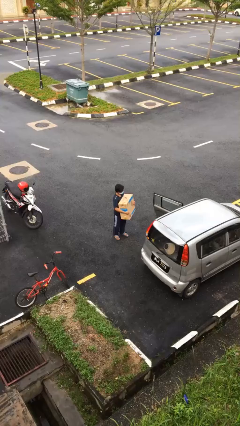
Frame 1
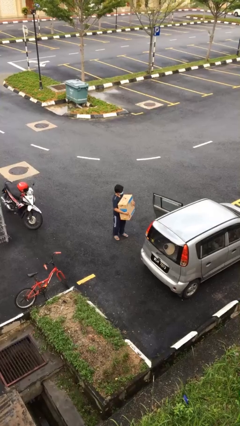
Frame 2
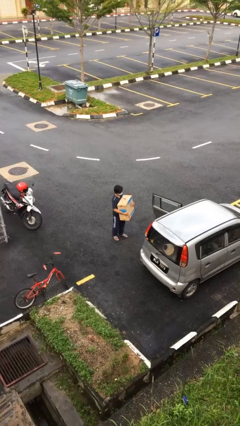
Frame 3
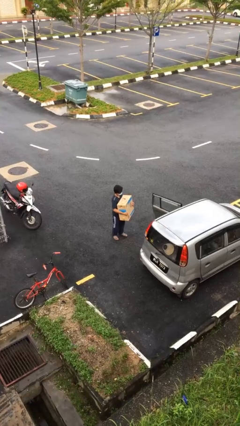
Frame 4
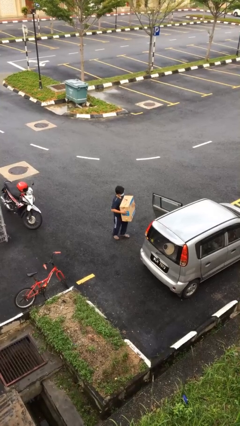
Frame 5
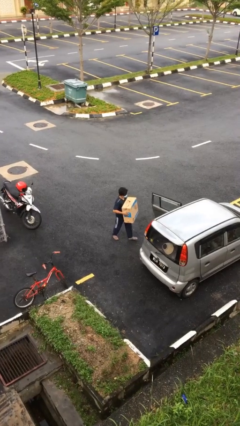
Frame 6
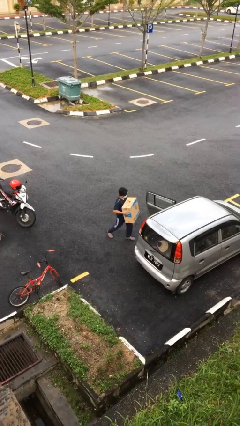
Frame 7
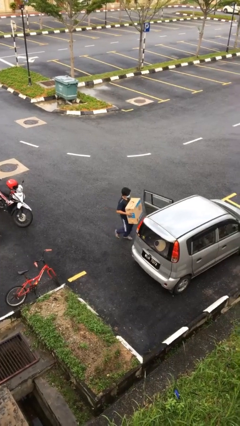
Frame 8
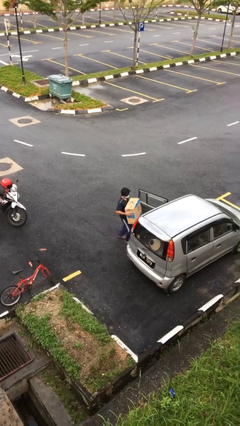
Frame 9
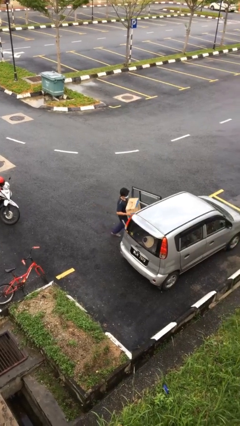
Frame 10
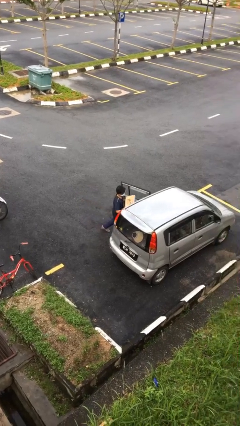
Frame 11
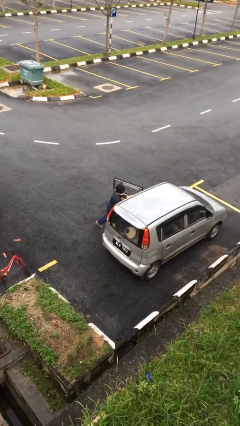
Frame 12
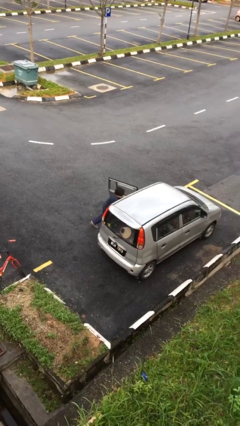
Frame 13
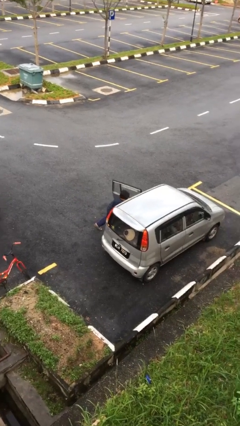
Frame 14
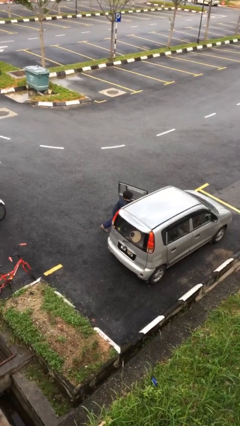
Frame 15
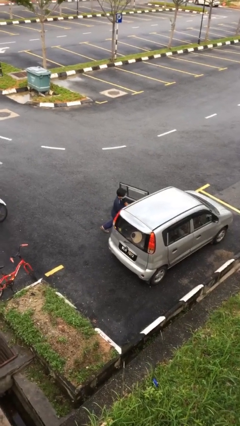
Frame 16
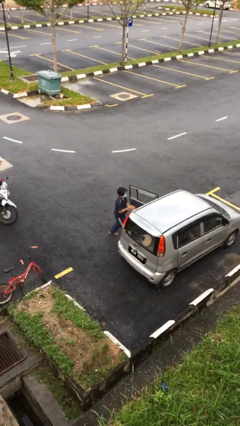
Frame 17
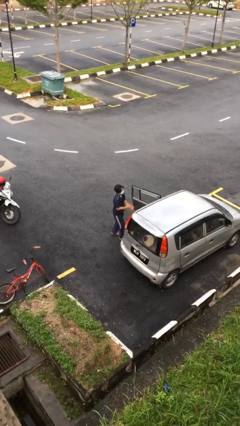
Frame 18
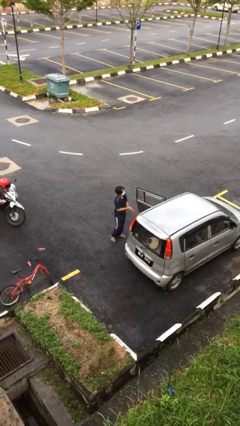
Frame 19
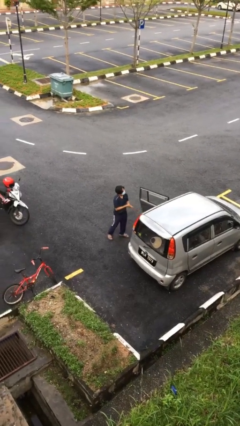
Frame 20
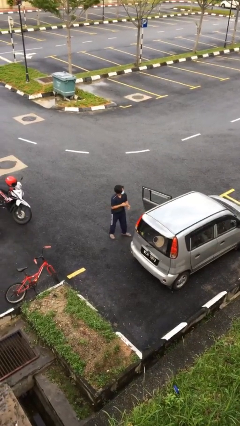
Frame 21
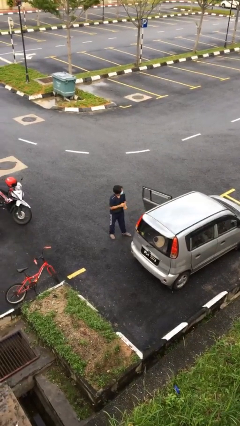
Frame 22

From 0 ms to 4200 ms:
person loads car

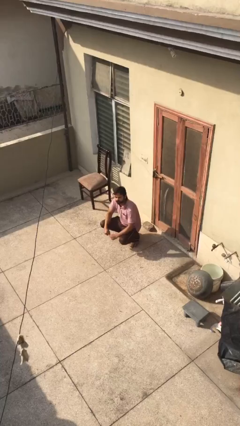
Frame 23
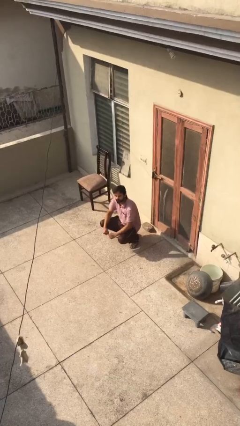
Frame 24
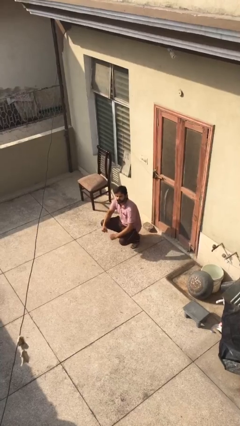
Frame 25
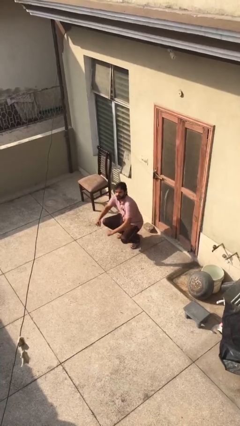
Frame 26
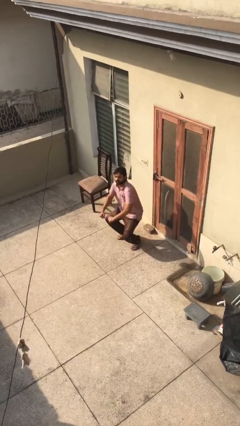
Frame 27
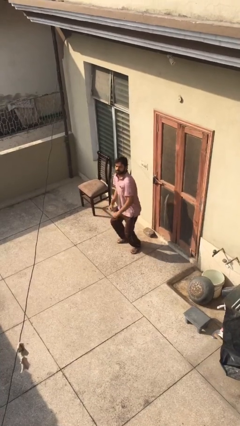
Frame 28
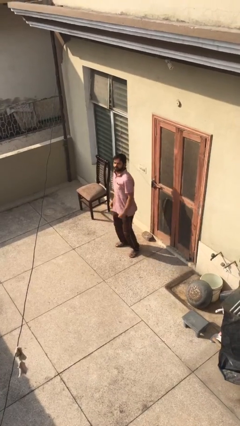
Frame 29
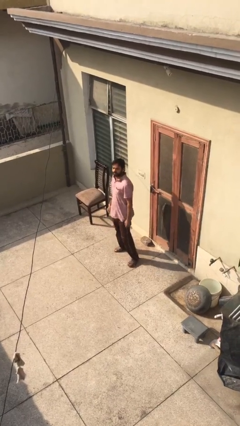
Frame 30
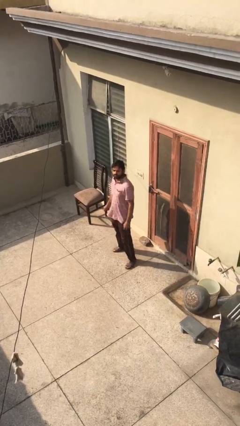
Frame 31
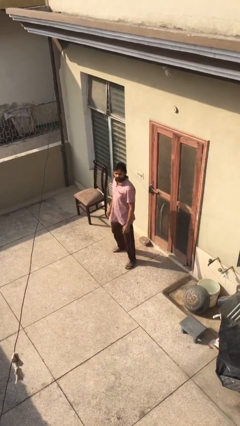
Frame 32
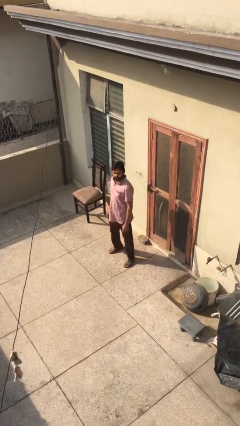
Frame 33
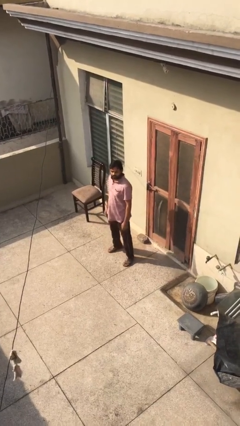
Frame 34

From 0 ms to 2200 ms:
person stands up

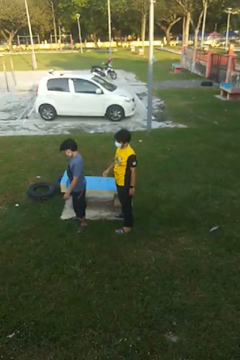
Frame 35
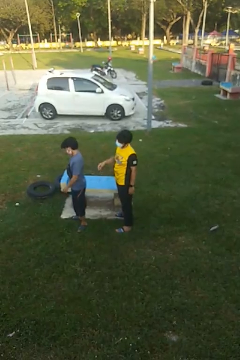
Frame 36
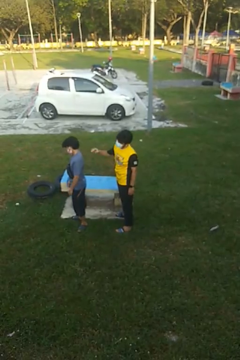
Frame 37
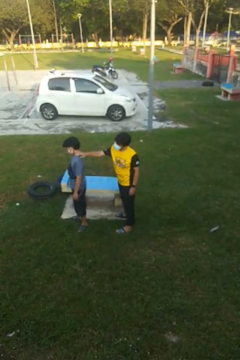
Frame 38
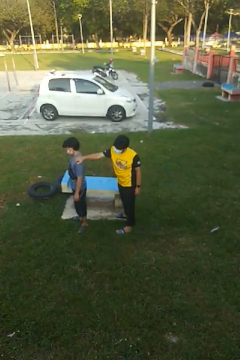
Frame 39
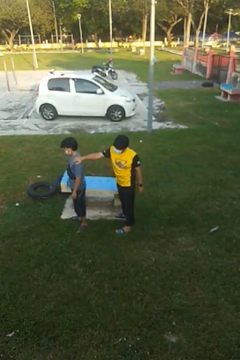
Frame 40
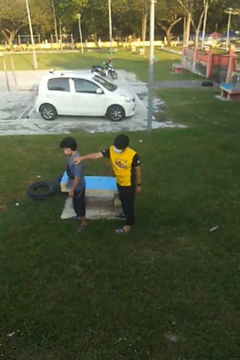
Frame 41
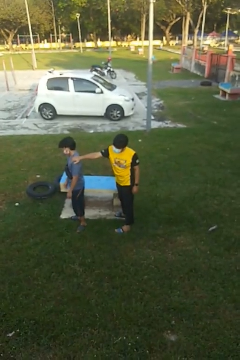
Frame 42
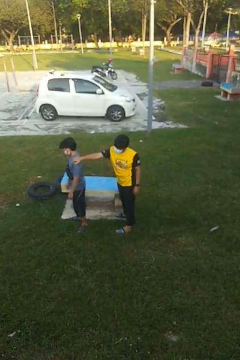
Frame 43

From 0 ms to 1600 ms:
person grabs person by shoulder

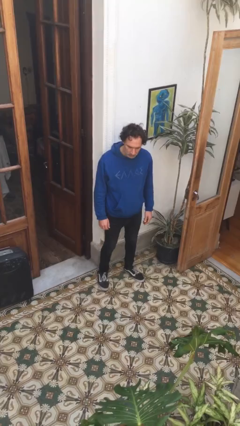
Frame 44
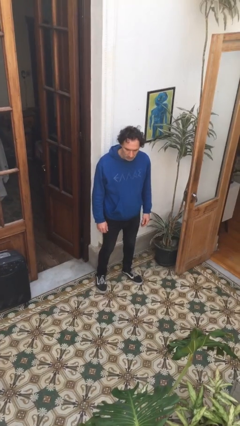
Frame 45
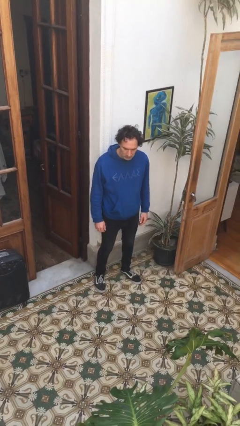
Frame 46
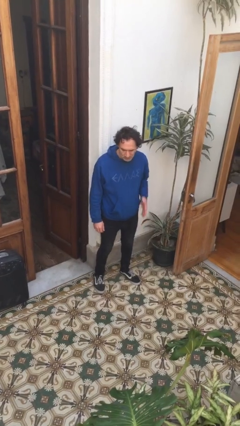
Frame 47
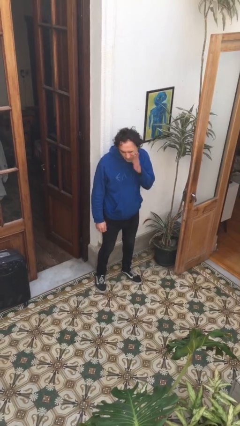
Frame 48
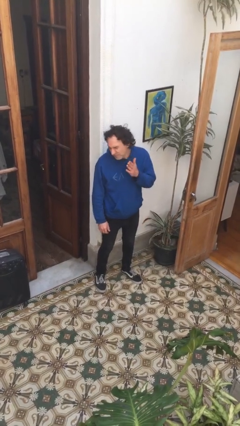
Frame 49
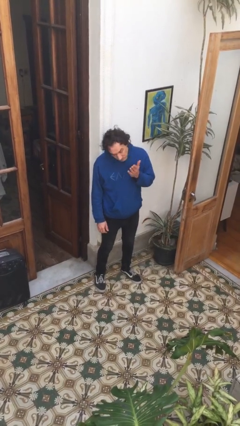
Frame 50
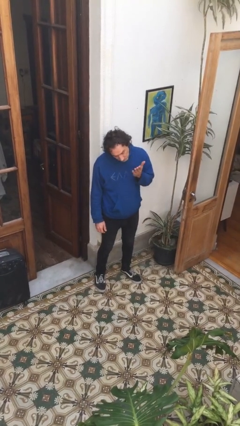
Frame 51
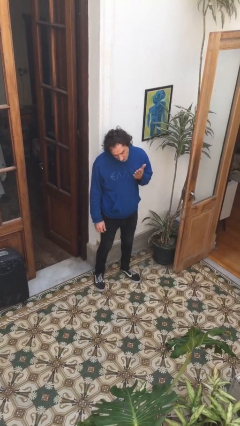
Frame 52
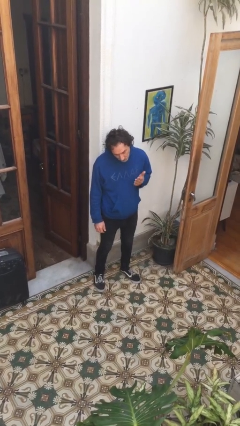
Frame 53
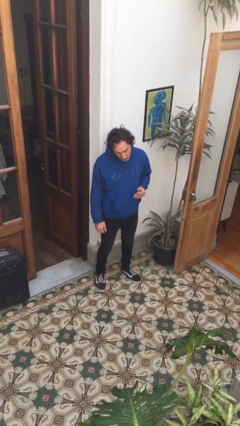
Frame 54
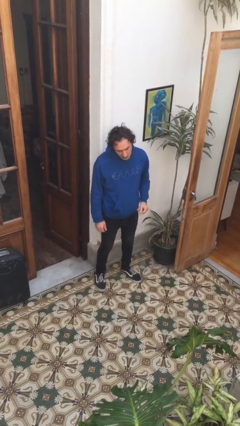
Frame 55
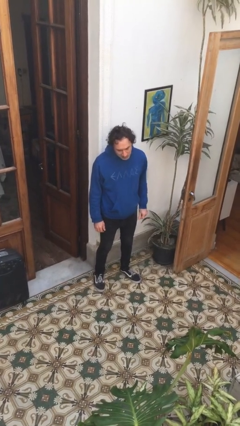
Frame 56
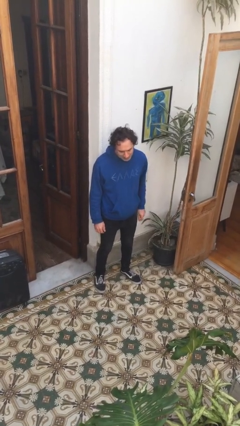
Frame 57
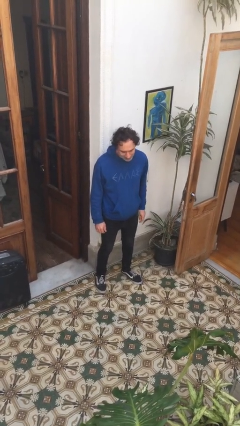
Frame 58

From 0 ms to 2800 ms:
person swats bug

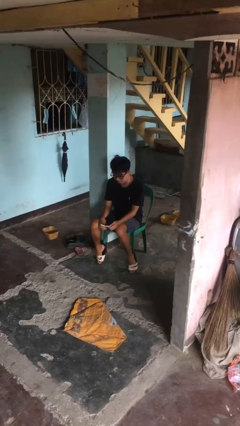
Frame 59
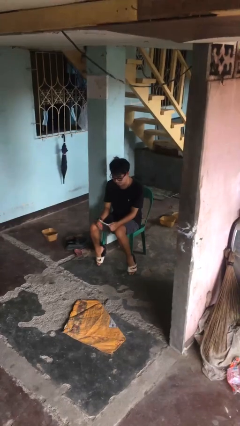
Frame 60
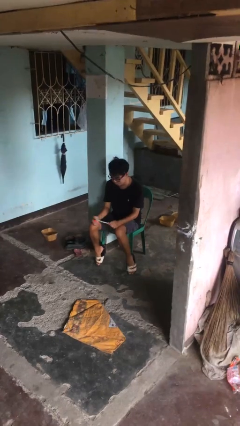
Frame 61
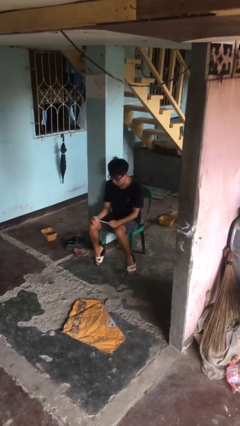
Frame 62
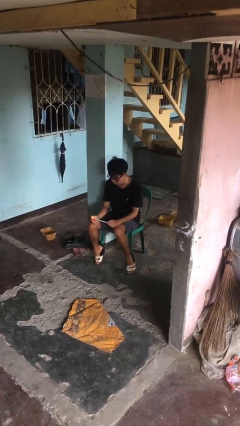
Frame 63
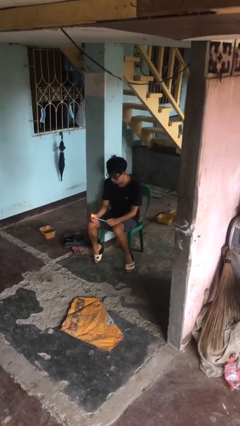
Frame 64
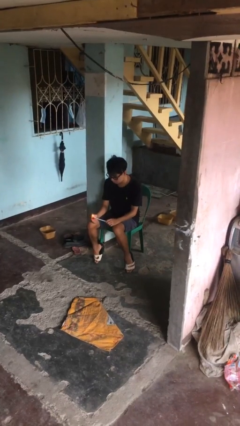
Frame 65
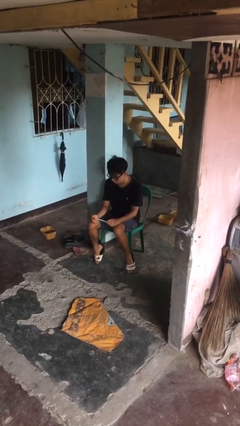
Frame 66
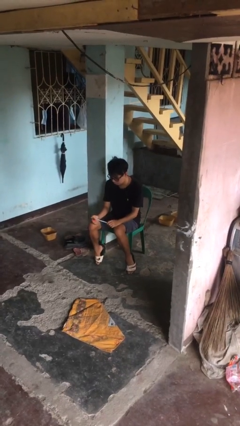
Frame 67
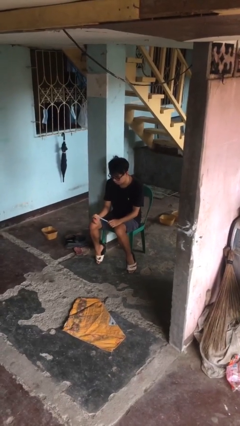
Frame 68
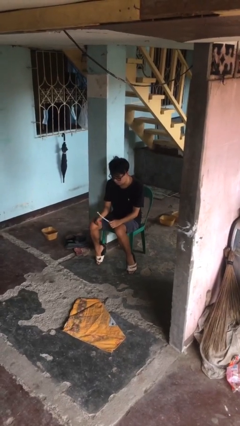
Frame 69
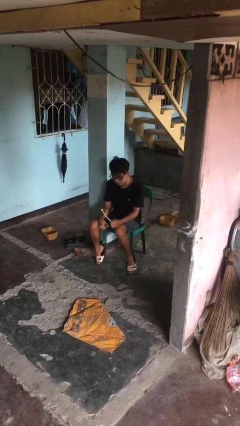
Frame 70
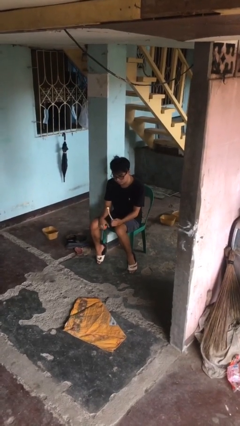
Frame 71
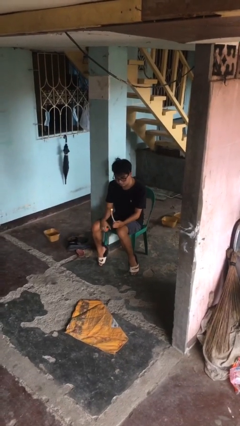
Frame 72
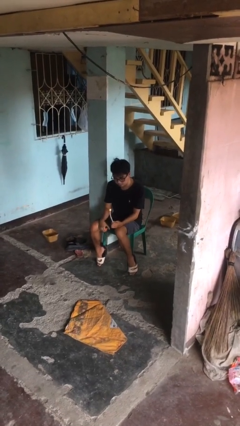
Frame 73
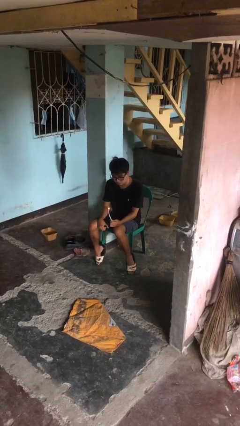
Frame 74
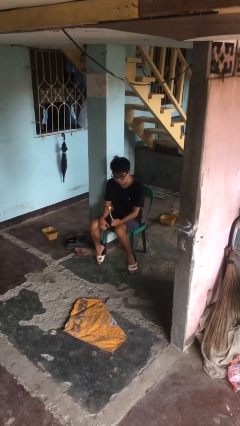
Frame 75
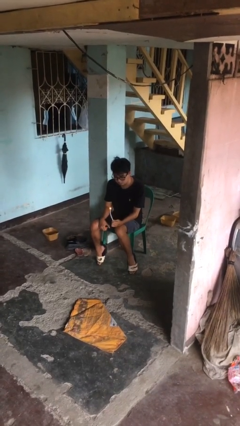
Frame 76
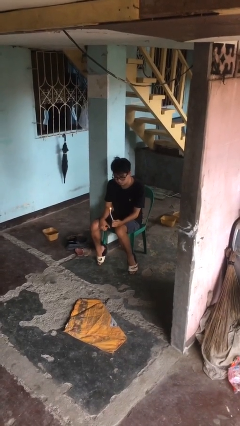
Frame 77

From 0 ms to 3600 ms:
person lights candle

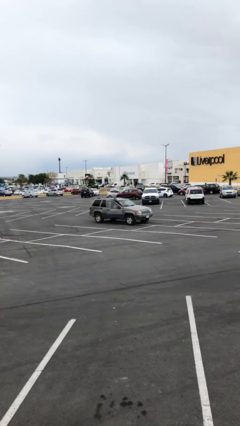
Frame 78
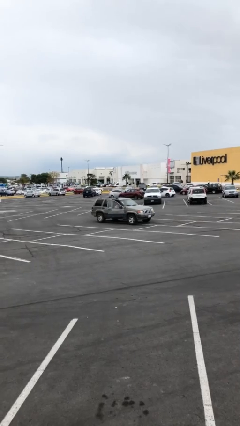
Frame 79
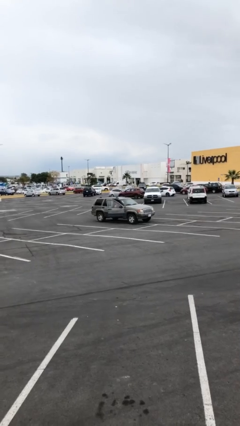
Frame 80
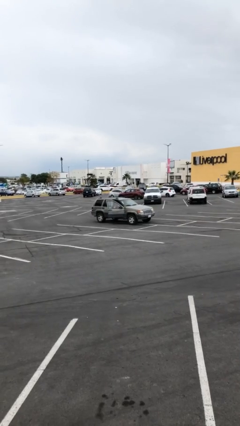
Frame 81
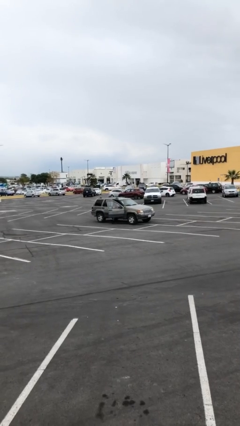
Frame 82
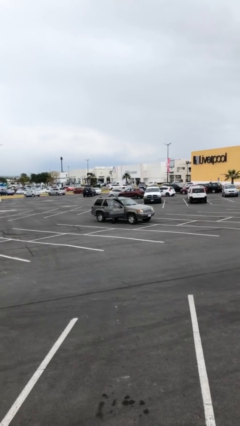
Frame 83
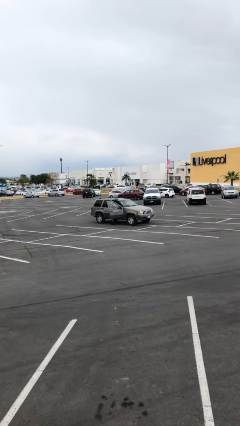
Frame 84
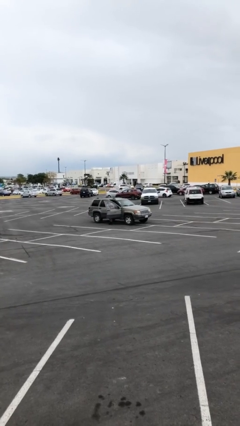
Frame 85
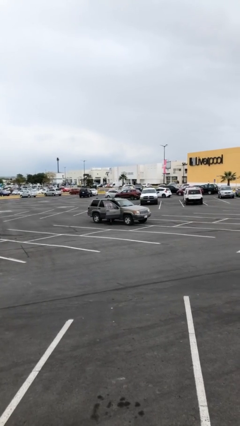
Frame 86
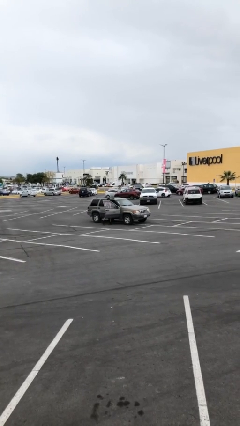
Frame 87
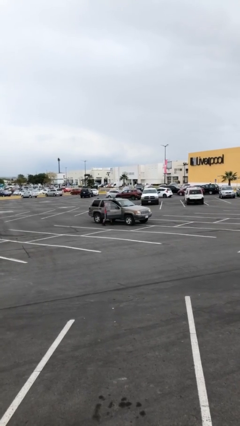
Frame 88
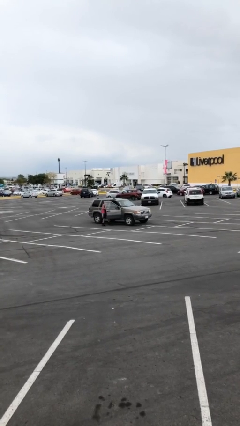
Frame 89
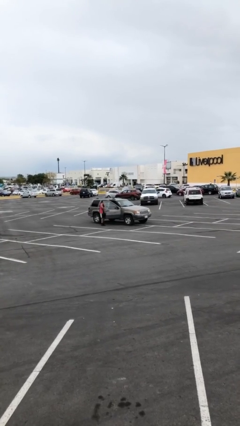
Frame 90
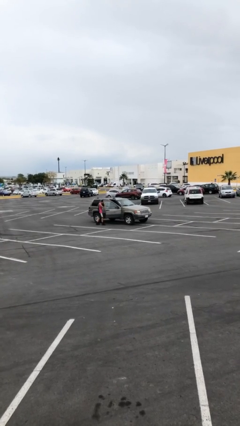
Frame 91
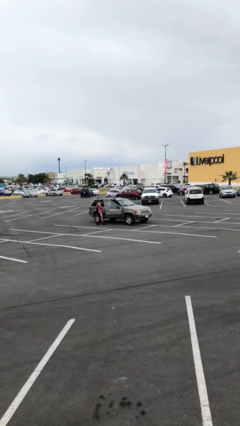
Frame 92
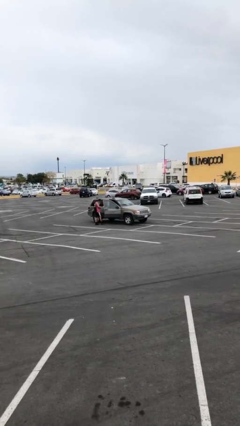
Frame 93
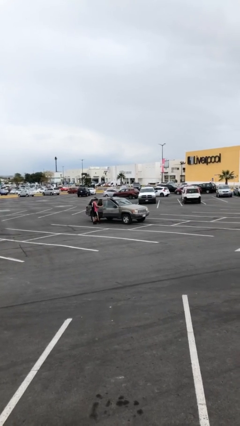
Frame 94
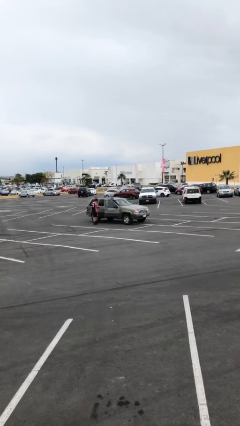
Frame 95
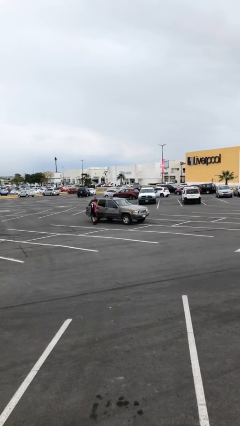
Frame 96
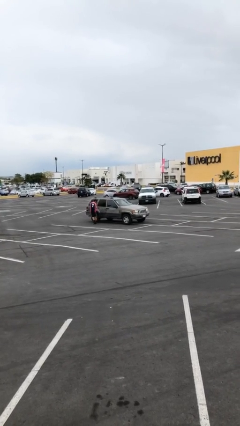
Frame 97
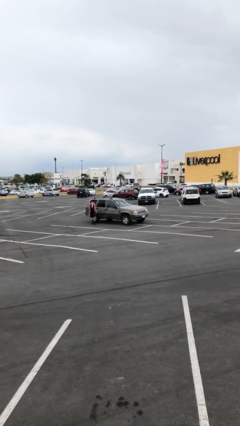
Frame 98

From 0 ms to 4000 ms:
car drops off person
